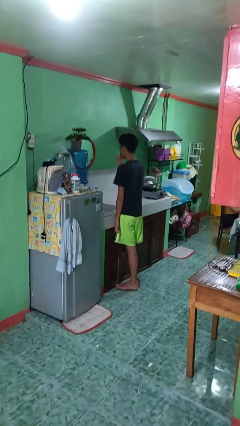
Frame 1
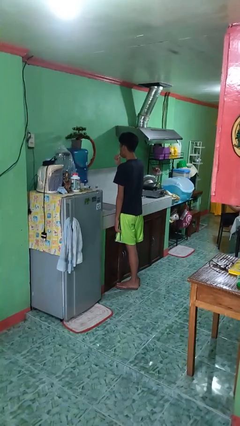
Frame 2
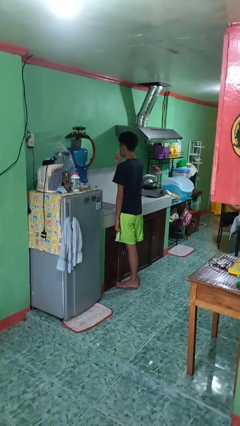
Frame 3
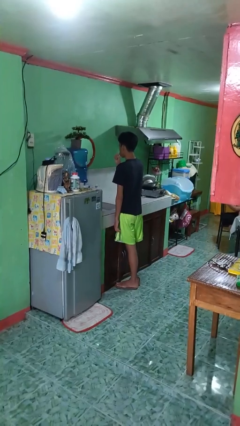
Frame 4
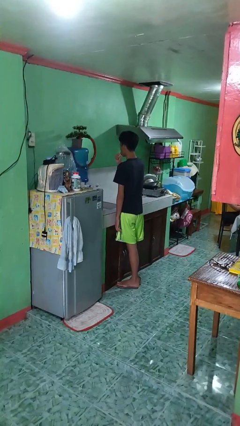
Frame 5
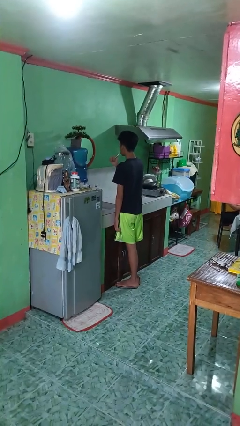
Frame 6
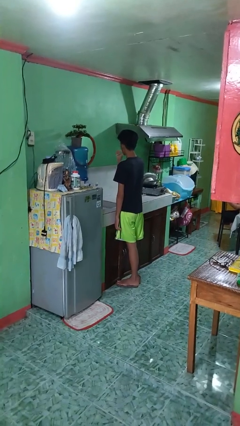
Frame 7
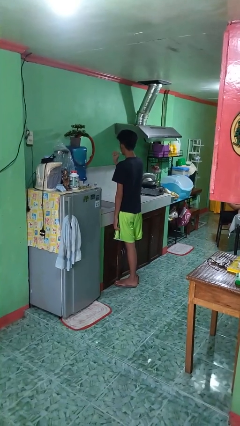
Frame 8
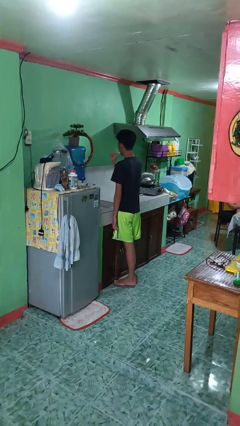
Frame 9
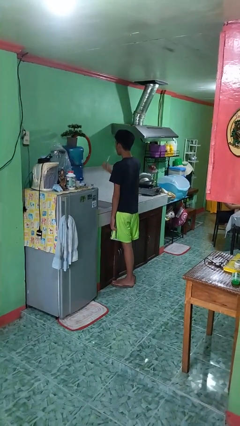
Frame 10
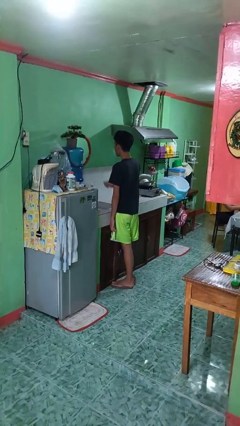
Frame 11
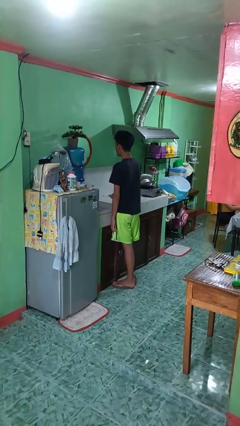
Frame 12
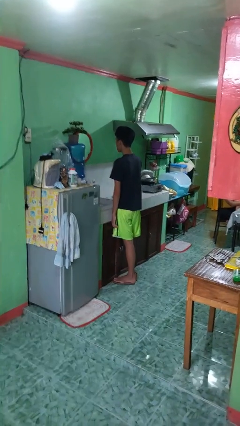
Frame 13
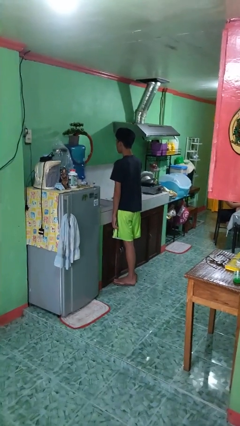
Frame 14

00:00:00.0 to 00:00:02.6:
person brushes teeth

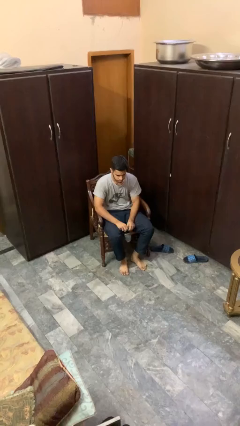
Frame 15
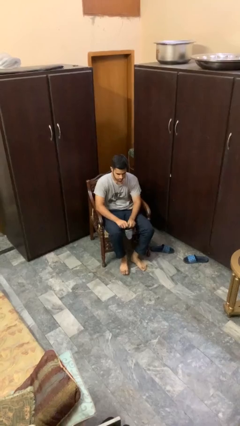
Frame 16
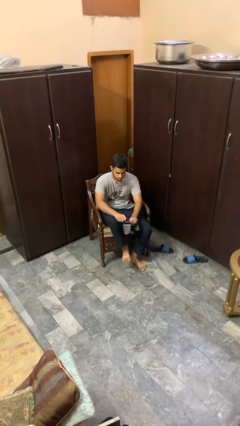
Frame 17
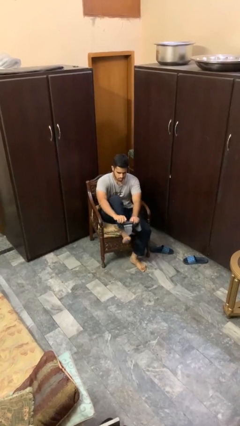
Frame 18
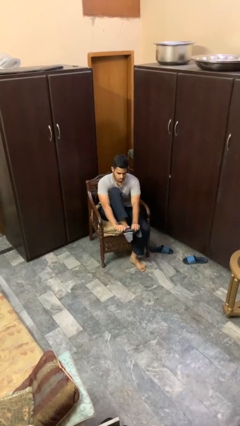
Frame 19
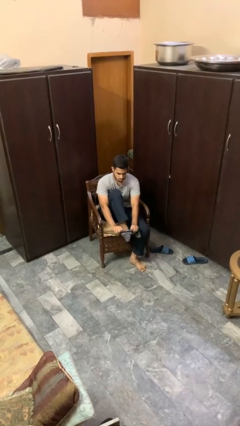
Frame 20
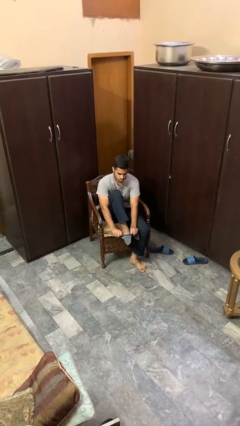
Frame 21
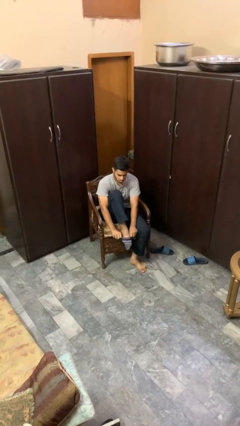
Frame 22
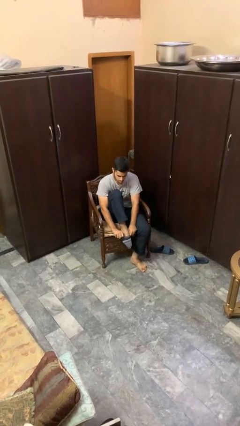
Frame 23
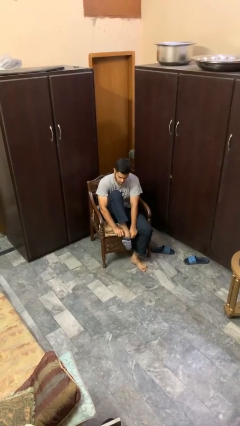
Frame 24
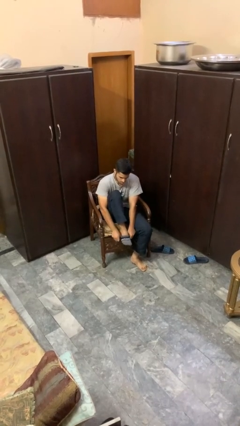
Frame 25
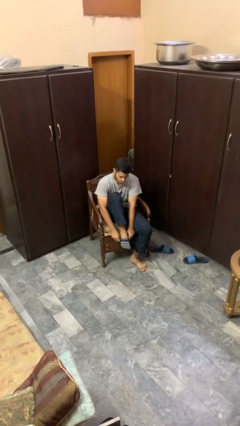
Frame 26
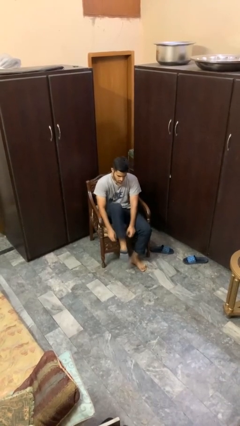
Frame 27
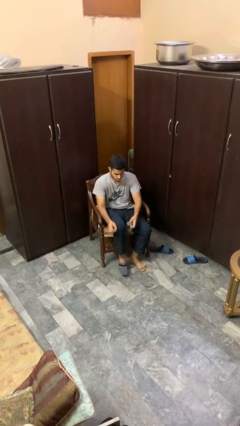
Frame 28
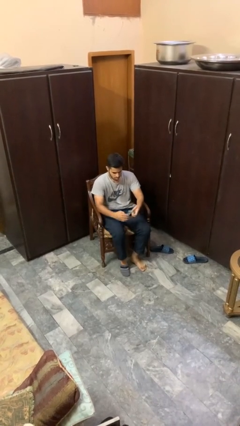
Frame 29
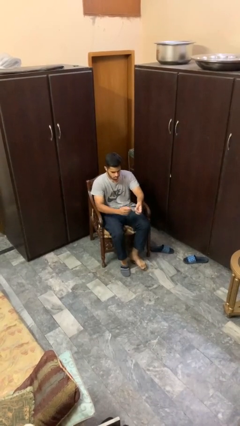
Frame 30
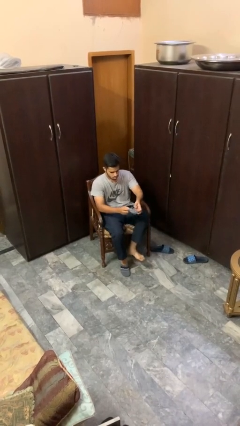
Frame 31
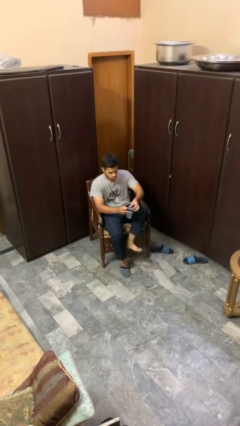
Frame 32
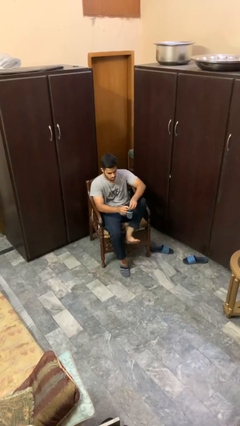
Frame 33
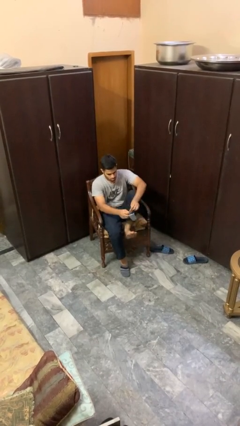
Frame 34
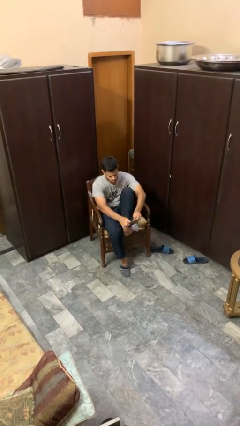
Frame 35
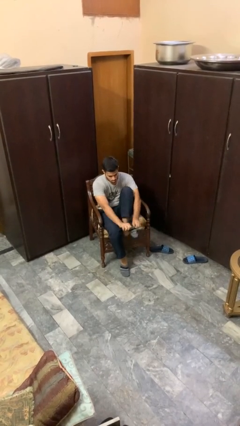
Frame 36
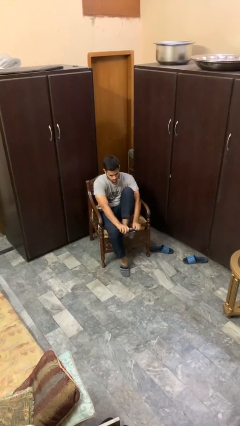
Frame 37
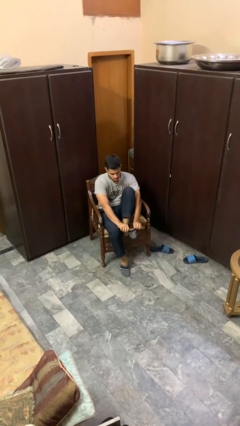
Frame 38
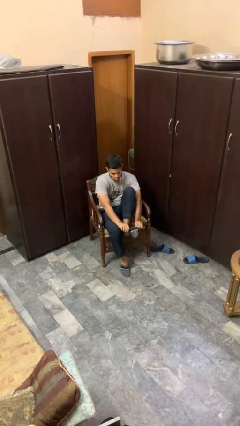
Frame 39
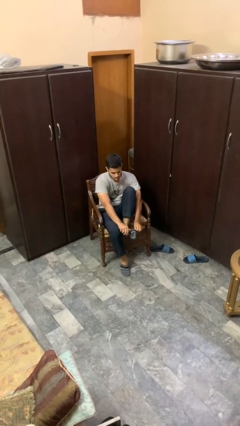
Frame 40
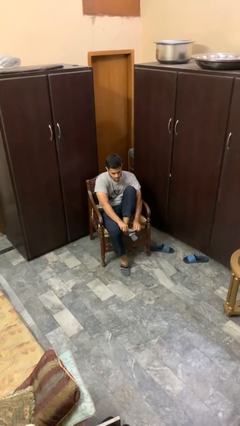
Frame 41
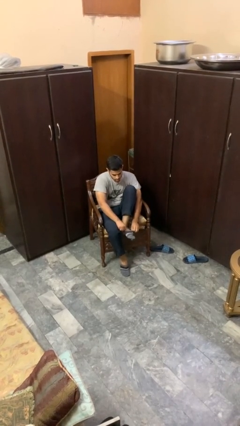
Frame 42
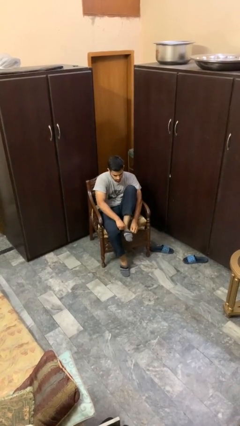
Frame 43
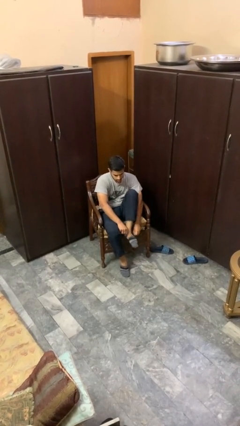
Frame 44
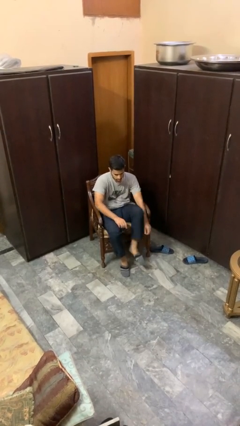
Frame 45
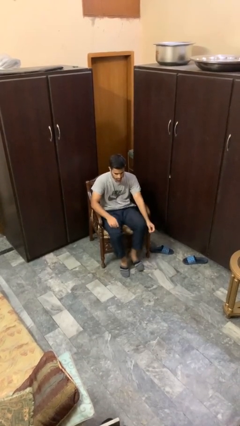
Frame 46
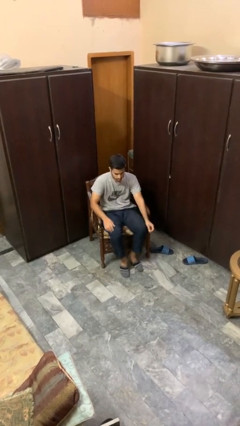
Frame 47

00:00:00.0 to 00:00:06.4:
person puts on socks

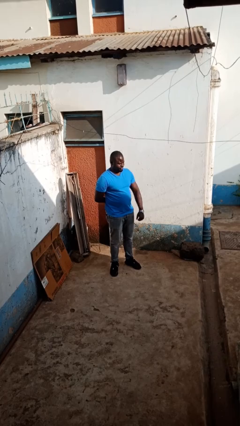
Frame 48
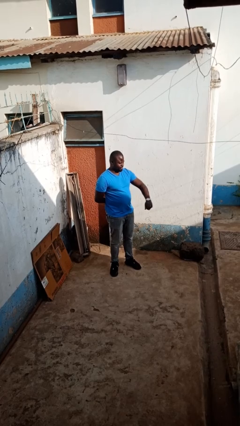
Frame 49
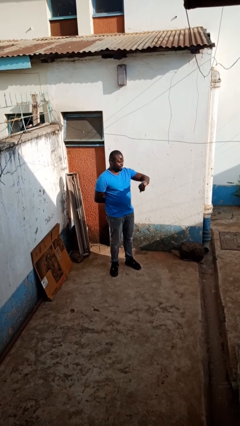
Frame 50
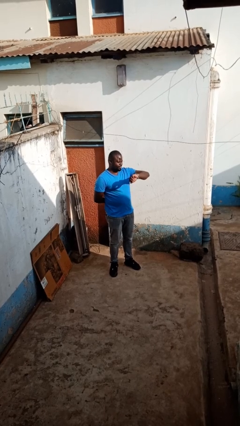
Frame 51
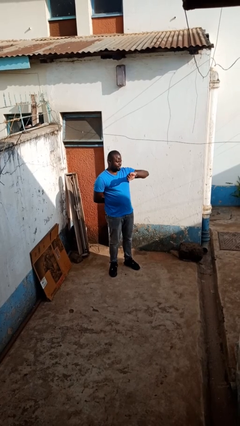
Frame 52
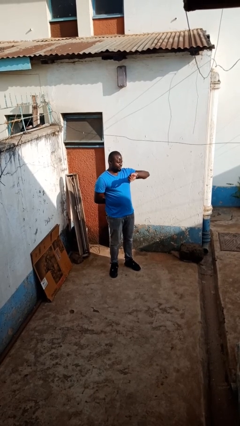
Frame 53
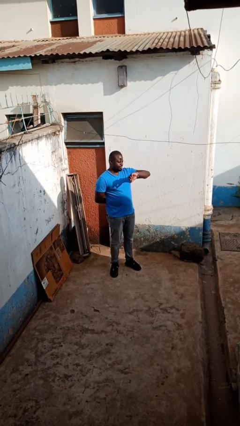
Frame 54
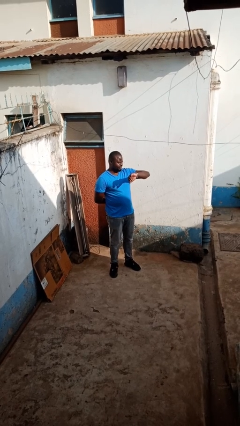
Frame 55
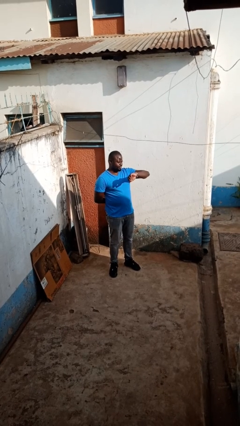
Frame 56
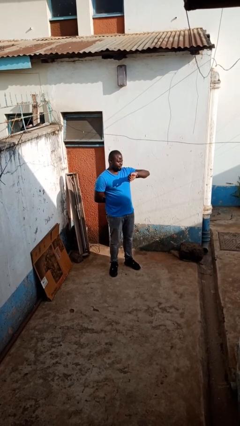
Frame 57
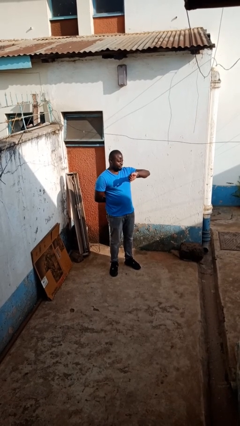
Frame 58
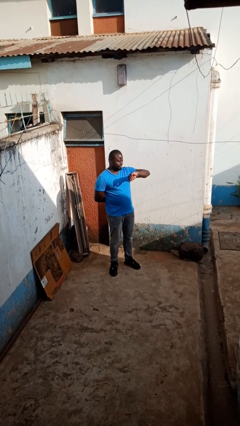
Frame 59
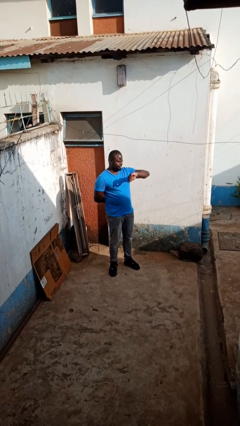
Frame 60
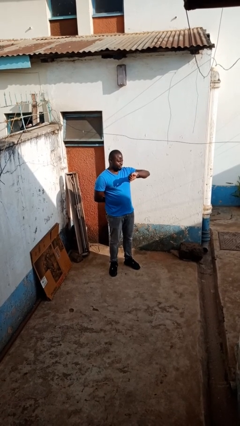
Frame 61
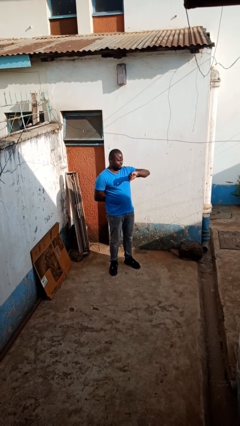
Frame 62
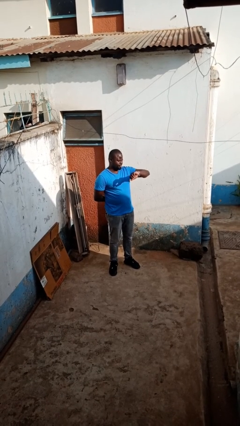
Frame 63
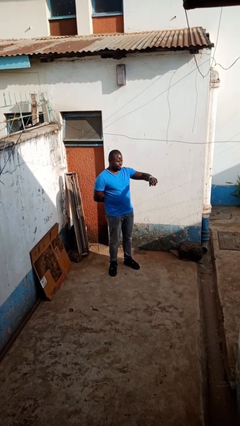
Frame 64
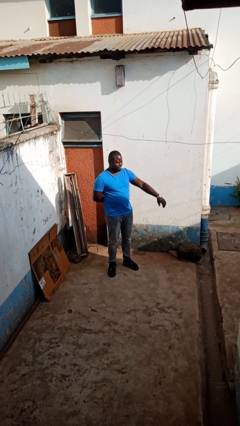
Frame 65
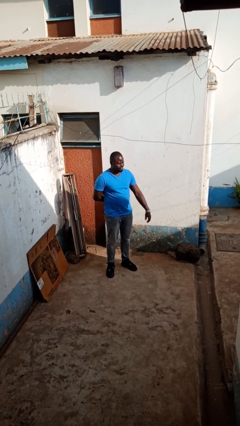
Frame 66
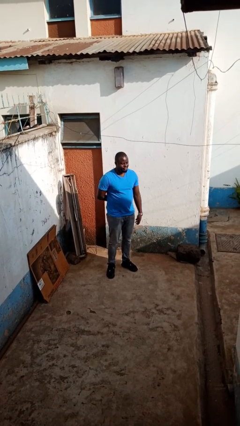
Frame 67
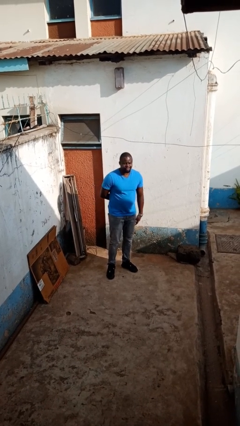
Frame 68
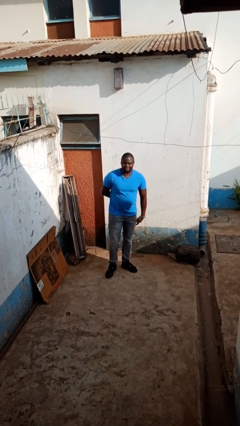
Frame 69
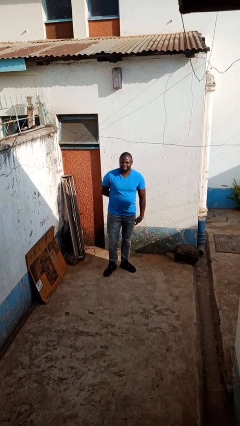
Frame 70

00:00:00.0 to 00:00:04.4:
person looks at wristwatch

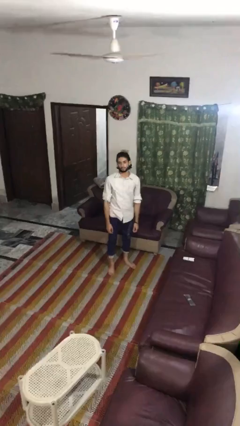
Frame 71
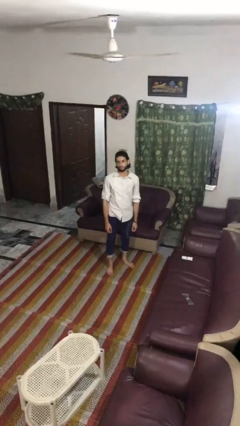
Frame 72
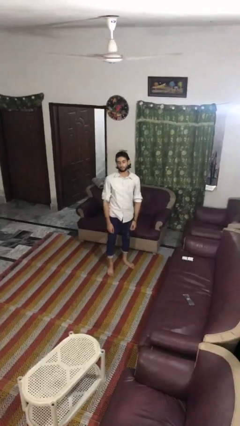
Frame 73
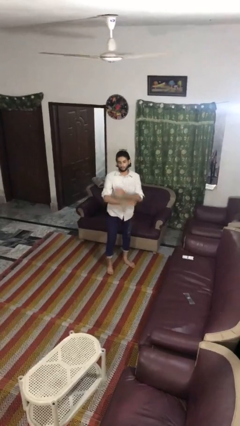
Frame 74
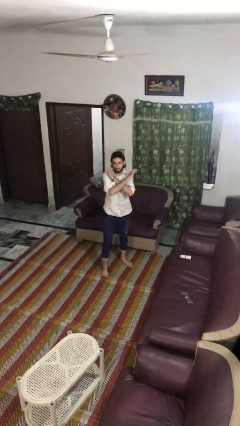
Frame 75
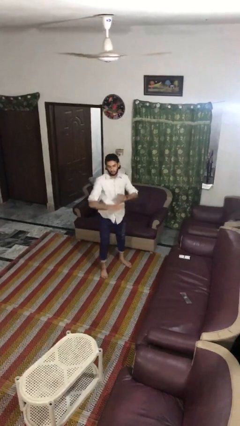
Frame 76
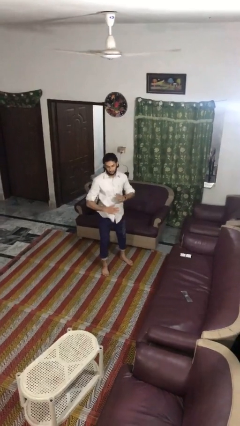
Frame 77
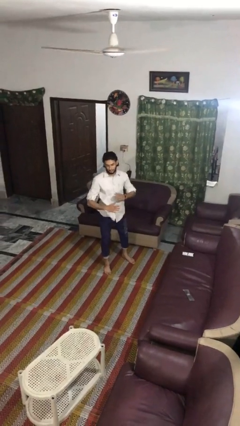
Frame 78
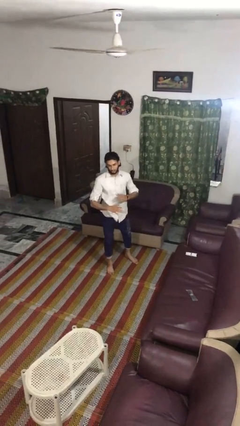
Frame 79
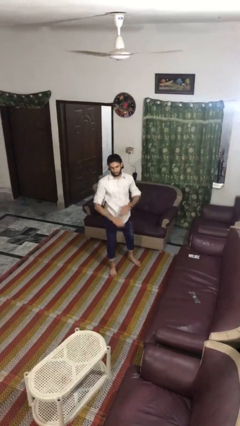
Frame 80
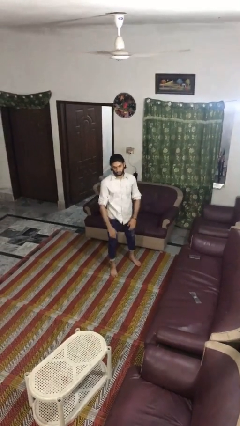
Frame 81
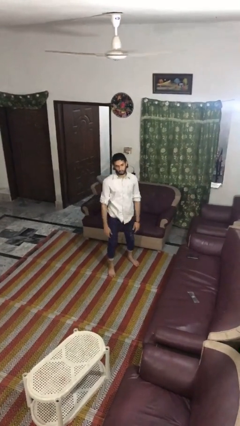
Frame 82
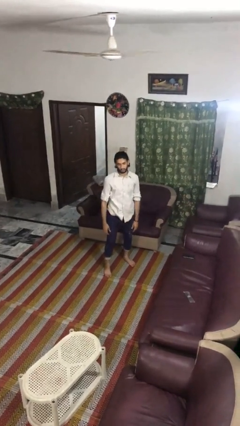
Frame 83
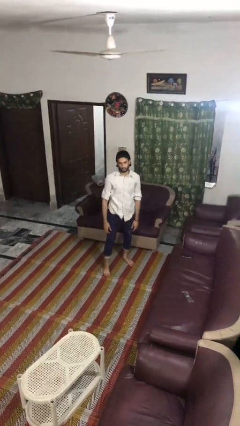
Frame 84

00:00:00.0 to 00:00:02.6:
person karate chop

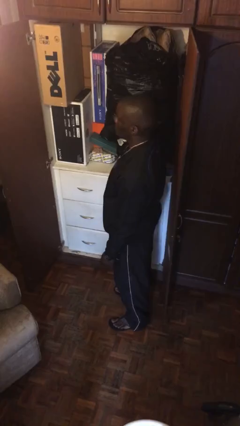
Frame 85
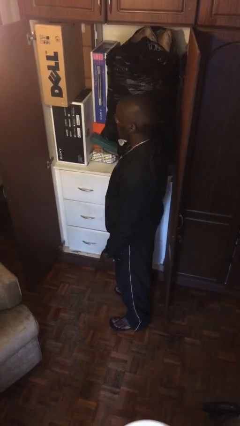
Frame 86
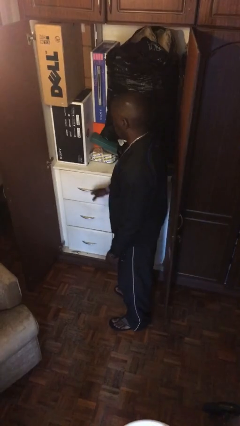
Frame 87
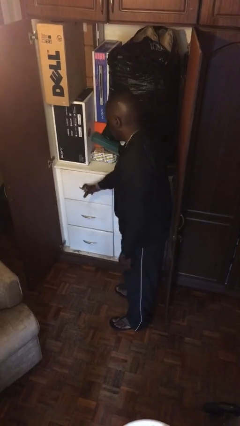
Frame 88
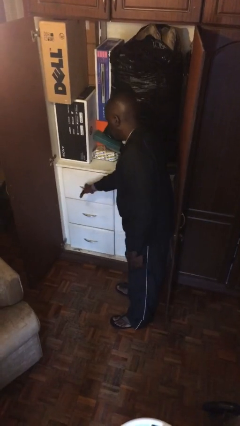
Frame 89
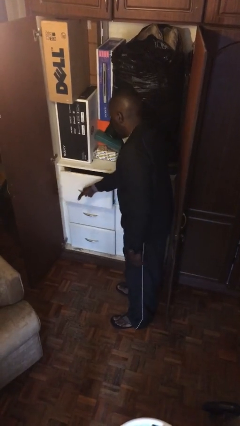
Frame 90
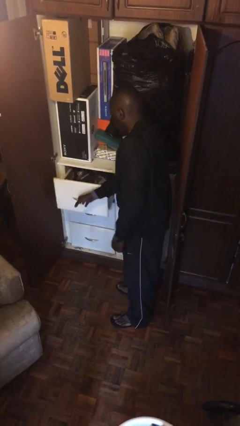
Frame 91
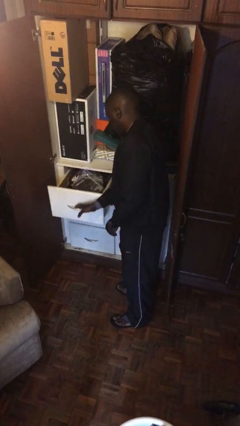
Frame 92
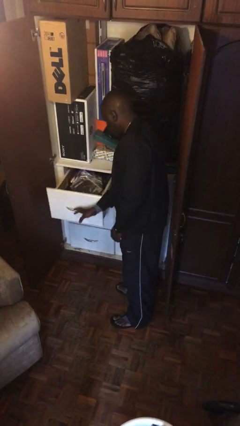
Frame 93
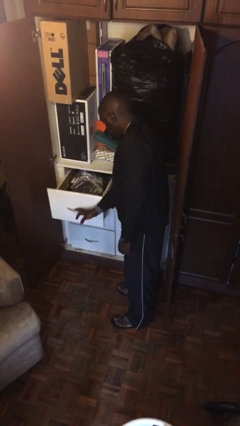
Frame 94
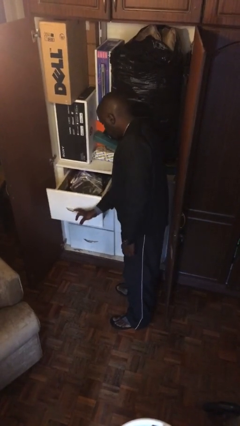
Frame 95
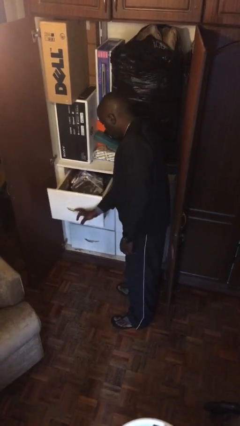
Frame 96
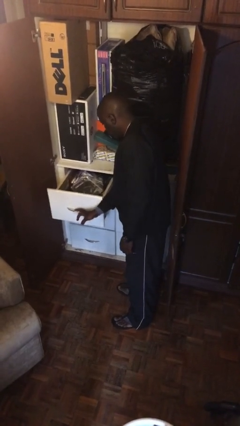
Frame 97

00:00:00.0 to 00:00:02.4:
person opens dresser drawer
